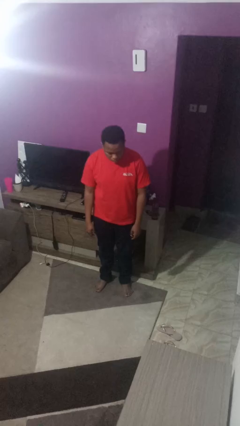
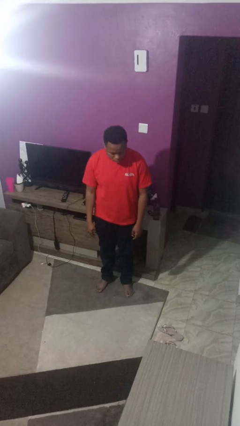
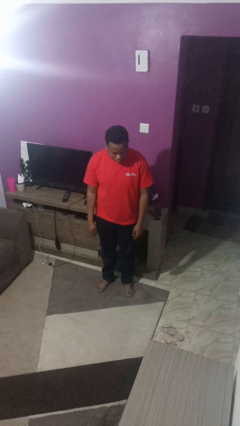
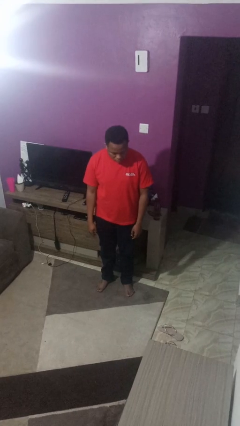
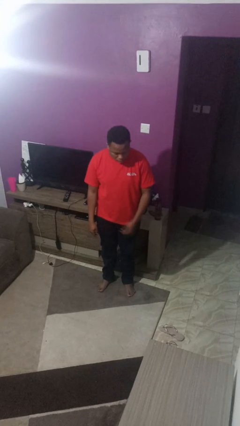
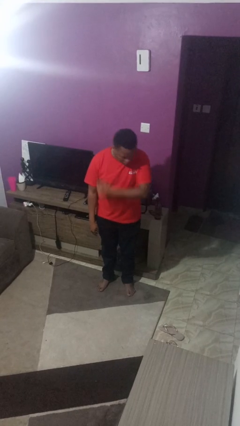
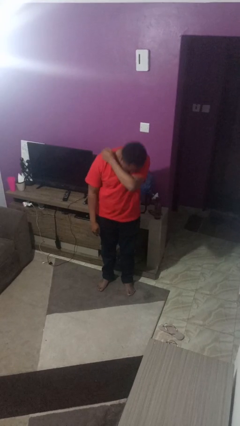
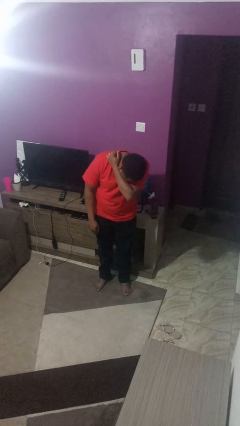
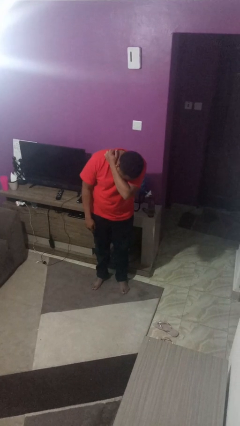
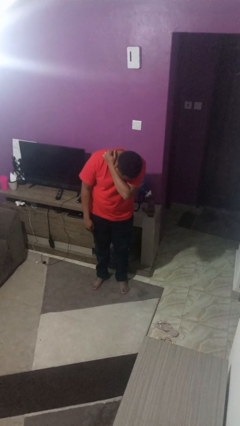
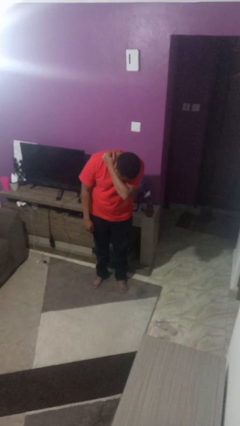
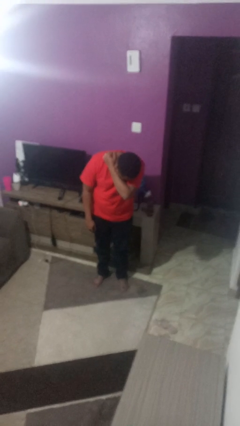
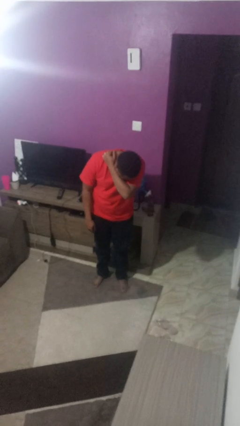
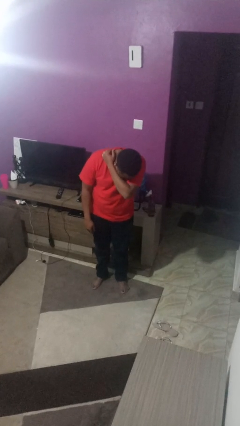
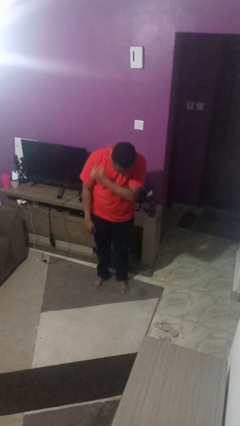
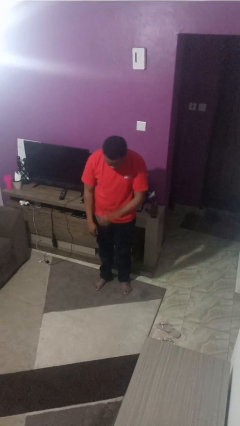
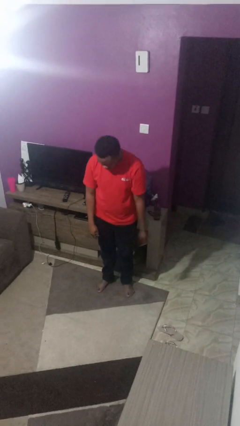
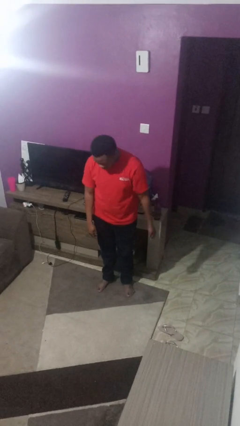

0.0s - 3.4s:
person sneezes into arm

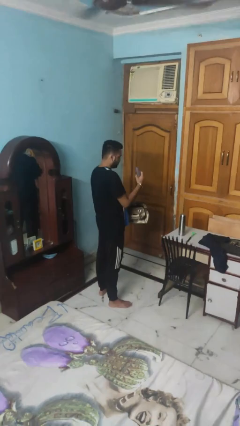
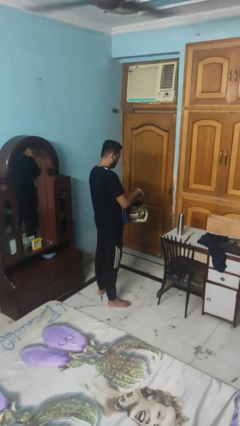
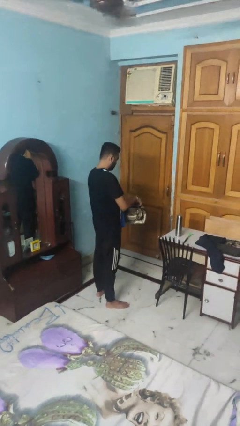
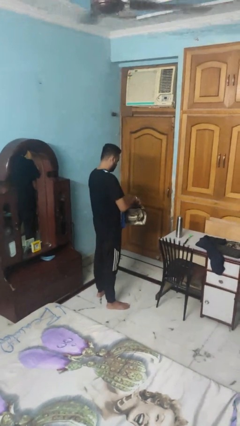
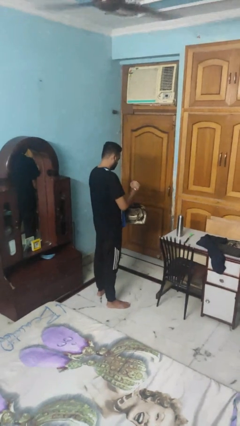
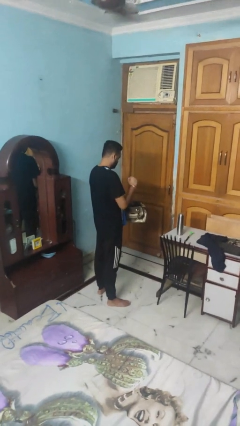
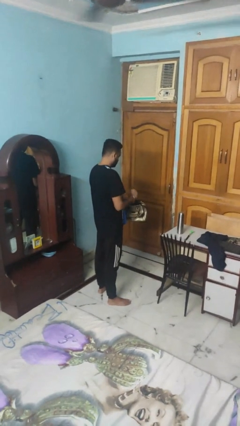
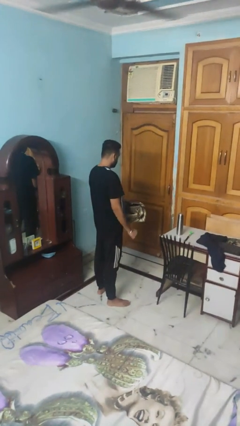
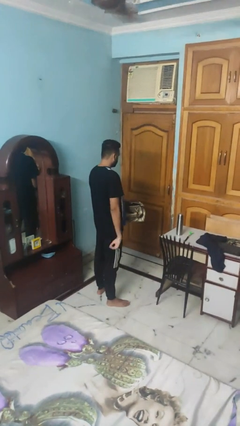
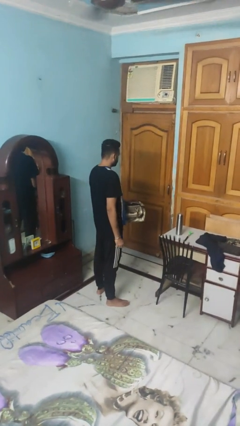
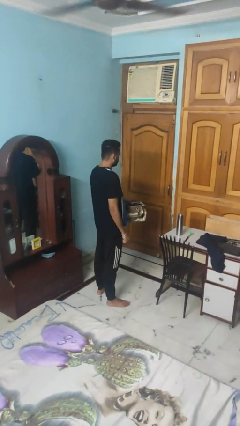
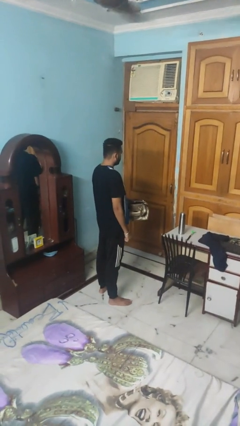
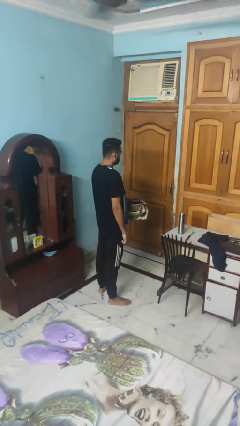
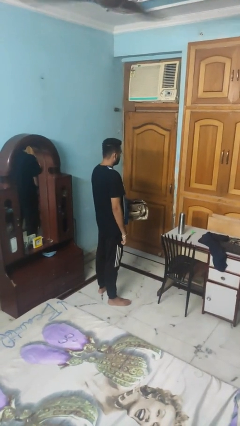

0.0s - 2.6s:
person puts object into purse

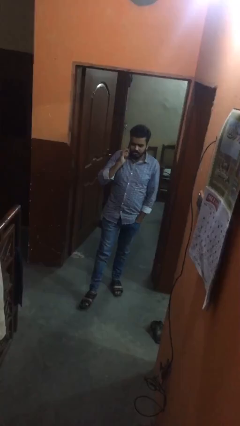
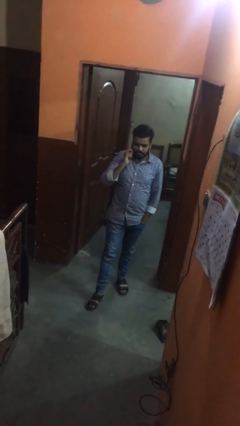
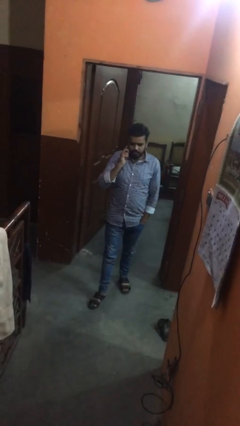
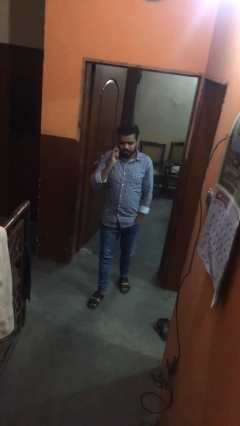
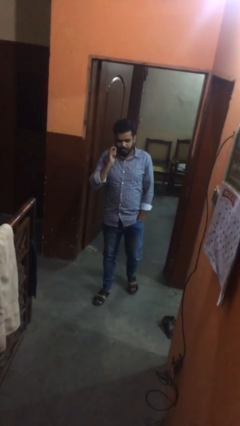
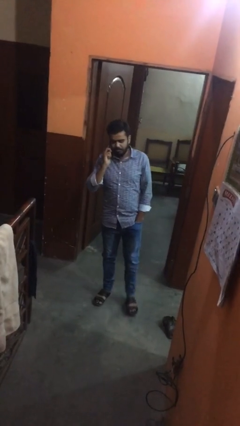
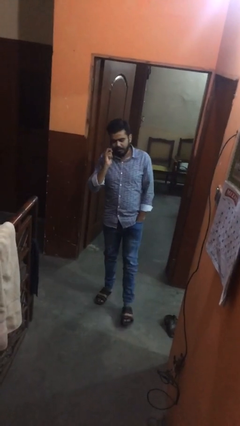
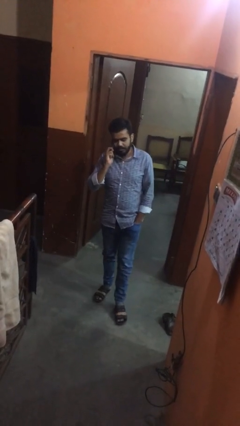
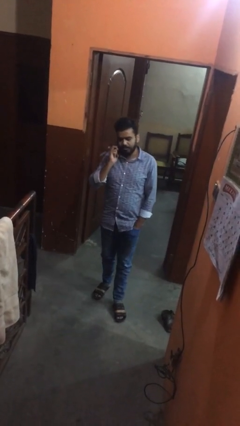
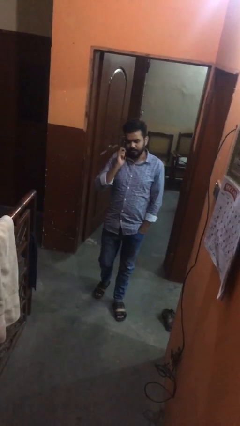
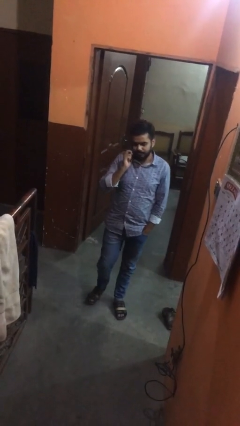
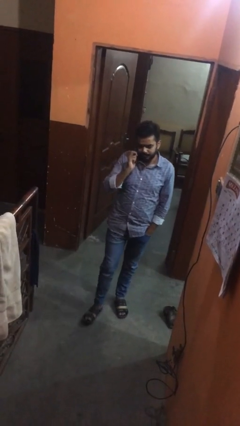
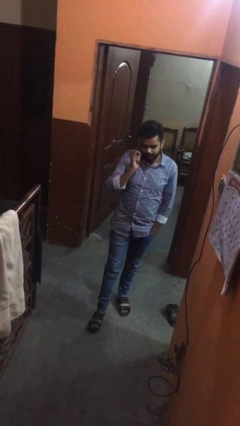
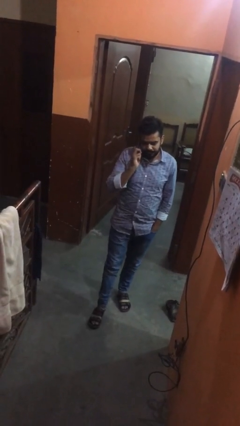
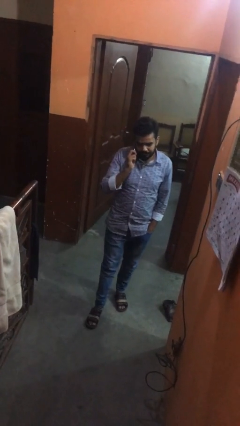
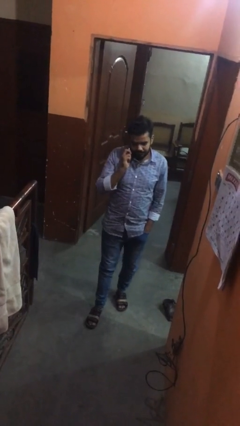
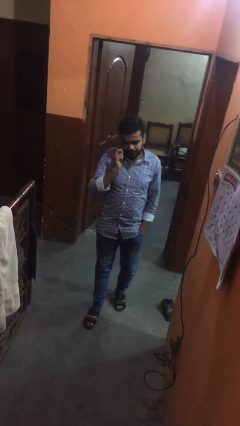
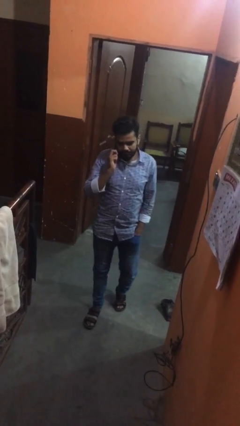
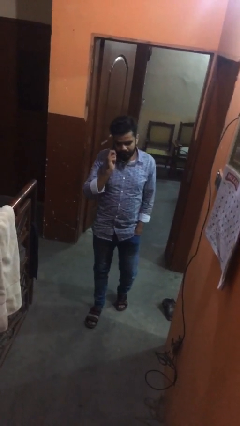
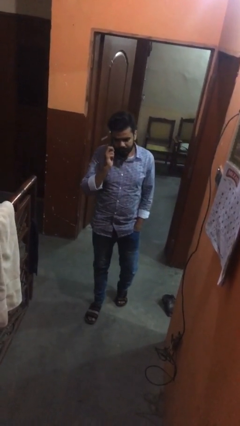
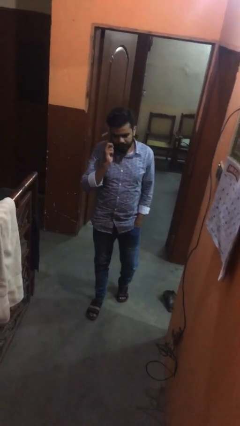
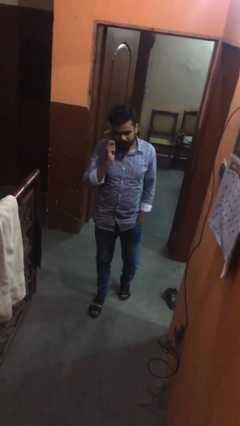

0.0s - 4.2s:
person enters scene through structure

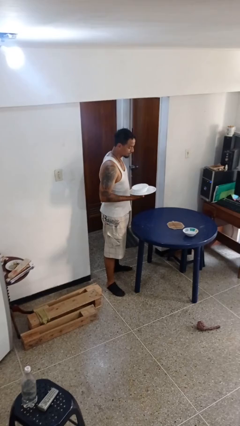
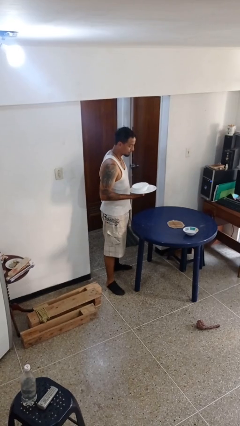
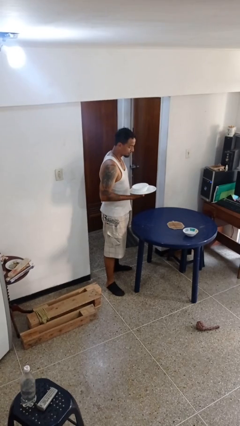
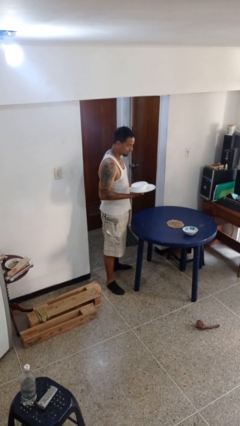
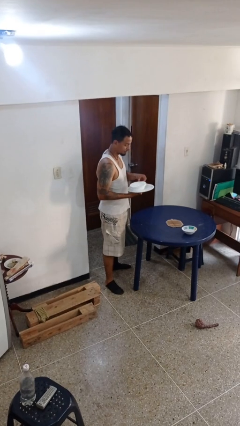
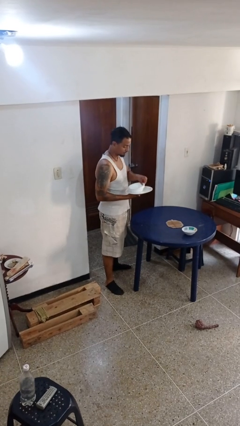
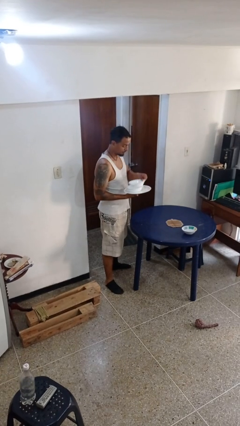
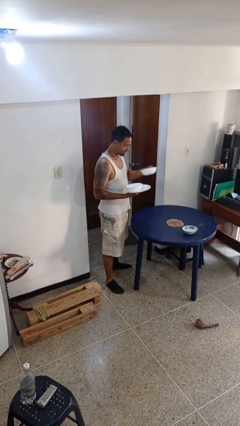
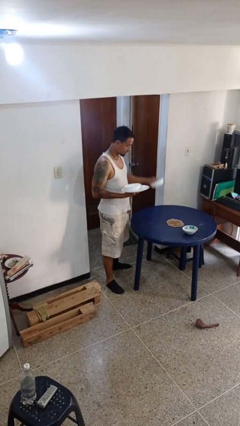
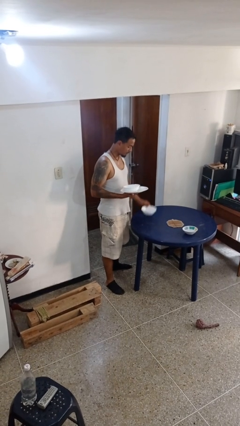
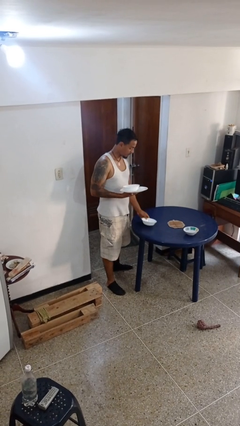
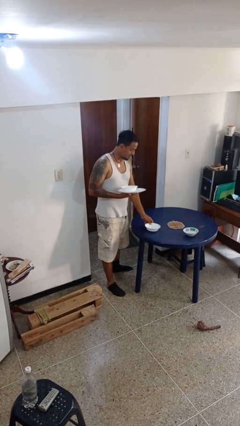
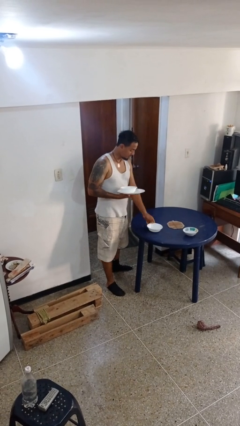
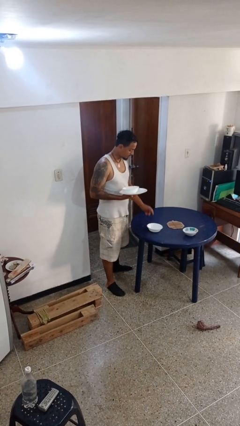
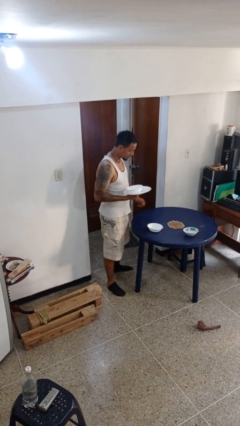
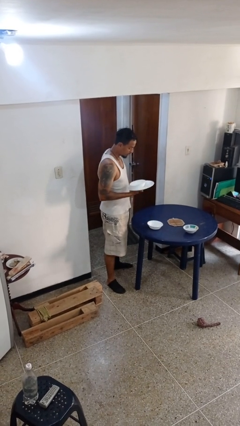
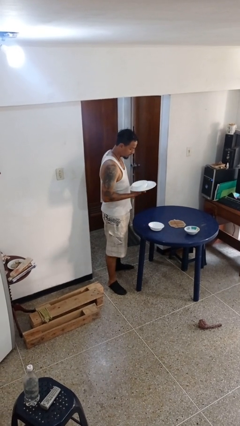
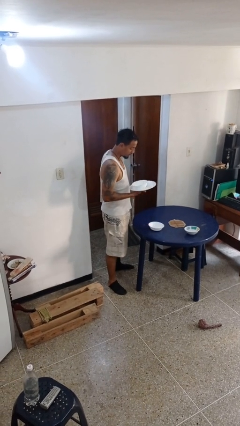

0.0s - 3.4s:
person sets table

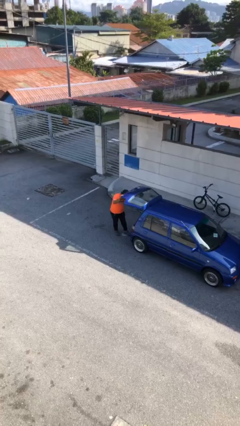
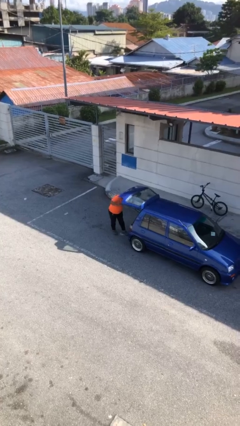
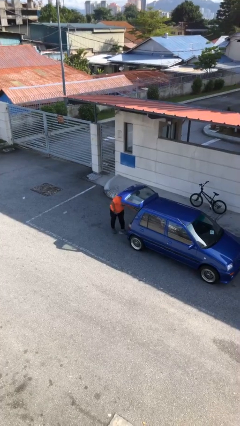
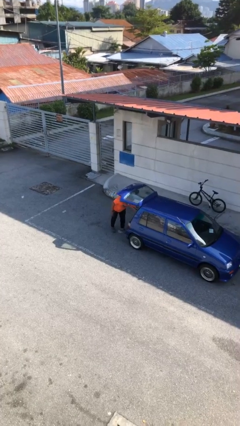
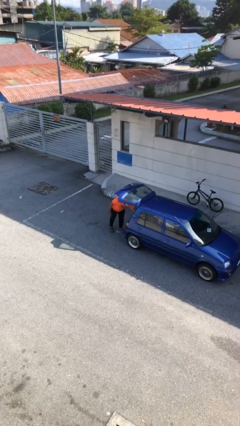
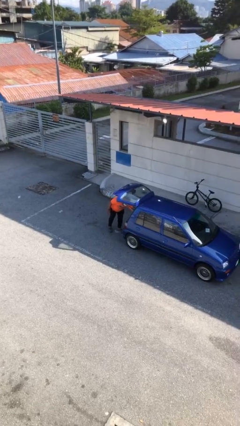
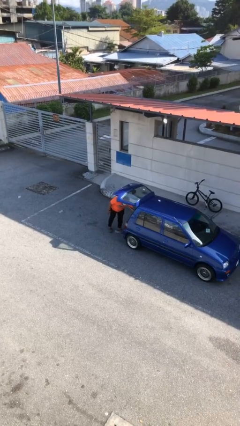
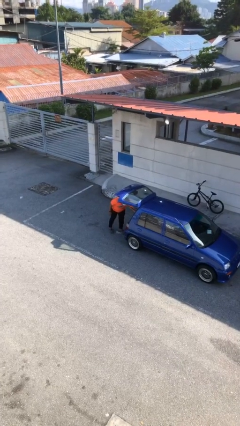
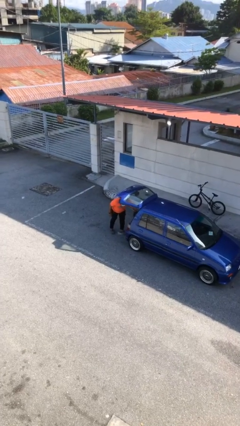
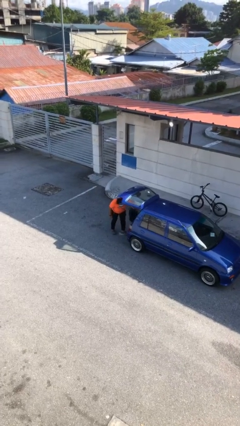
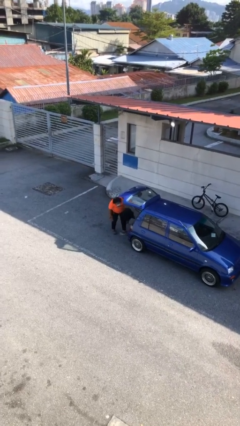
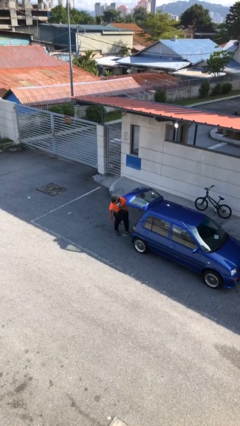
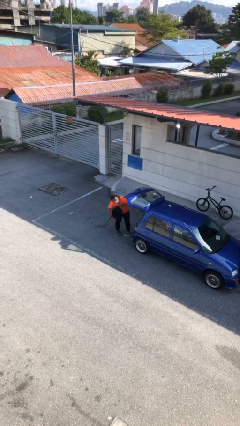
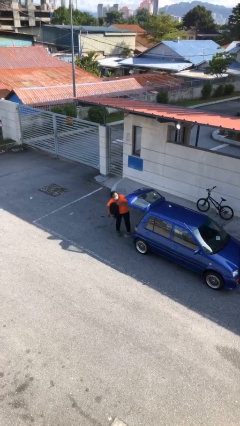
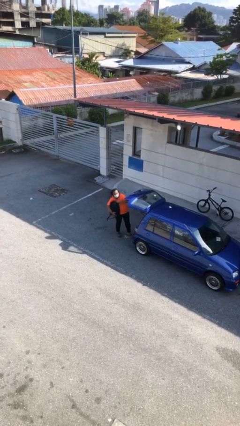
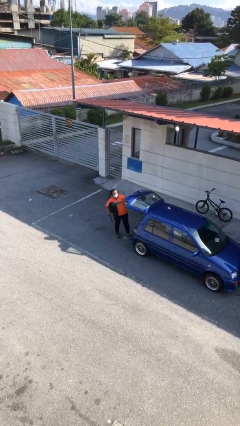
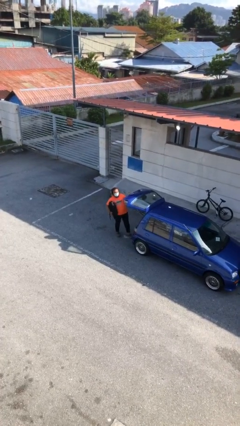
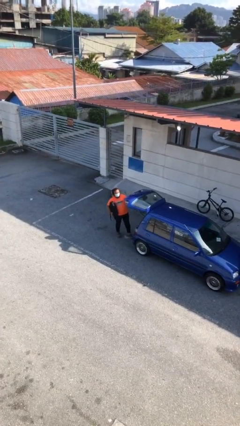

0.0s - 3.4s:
person unloads car

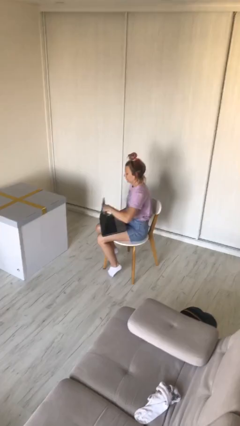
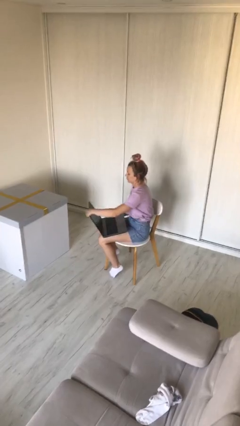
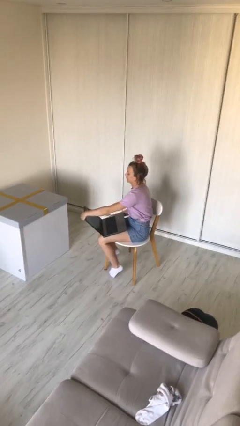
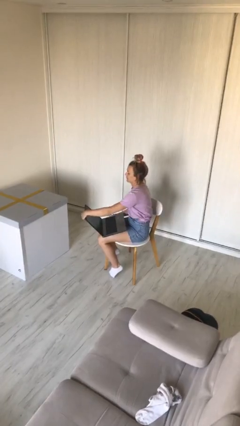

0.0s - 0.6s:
person opens laptop
